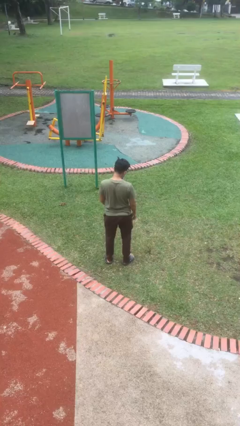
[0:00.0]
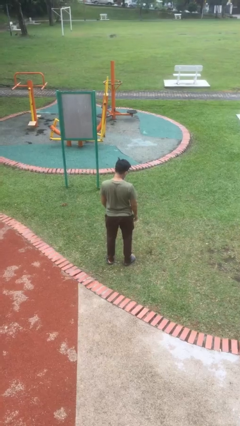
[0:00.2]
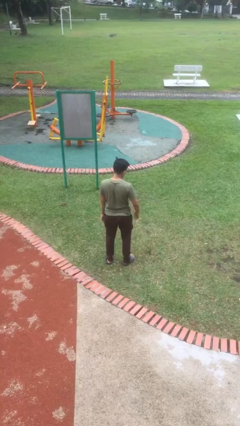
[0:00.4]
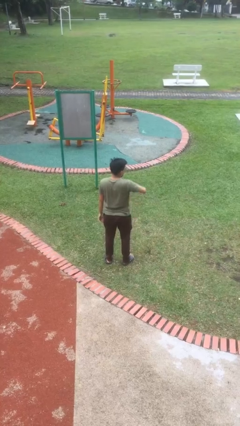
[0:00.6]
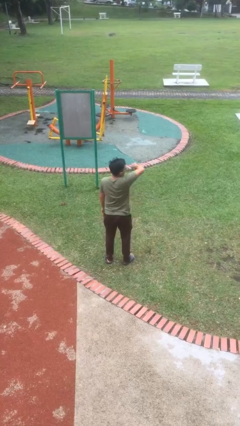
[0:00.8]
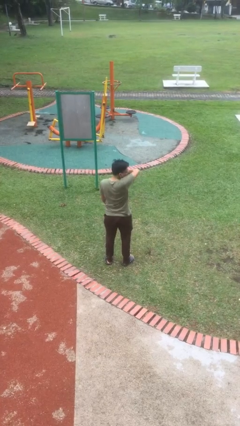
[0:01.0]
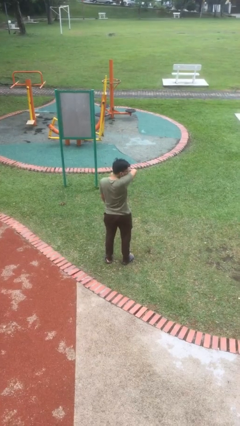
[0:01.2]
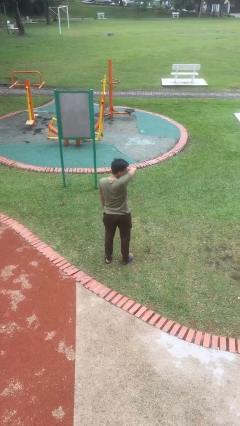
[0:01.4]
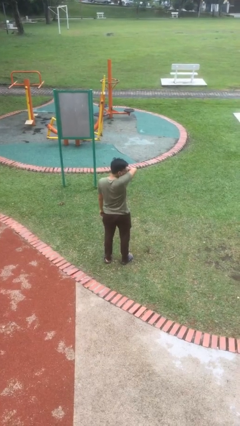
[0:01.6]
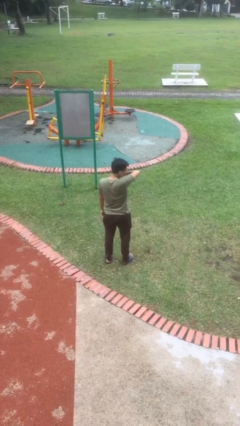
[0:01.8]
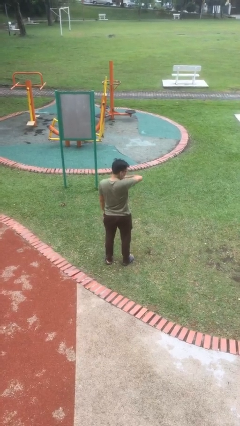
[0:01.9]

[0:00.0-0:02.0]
person sneezes into arm

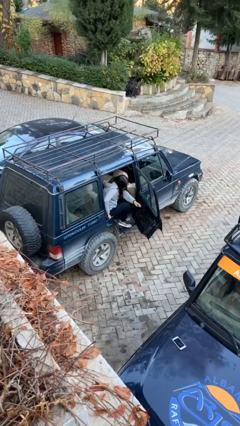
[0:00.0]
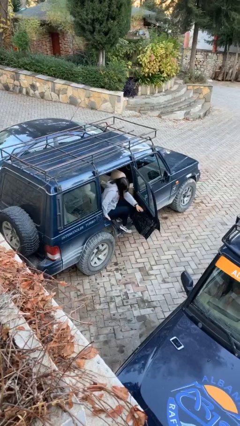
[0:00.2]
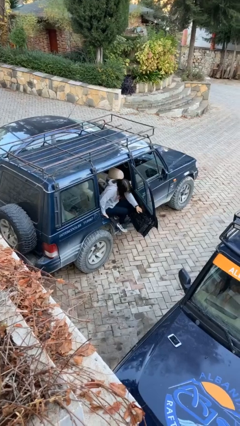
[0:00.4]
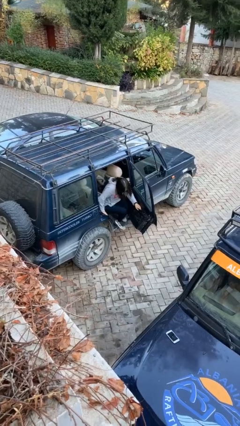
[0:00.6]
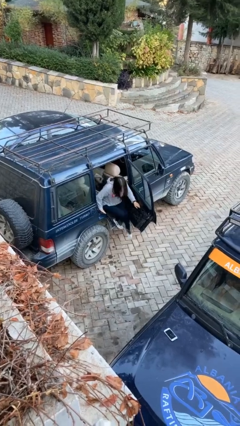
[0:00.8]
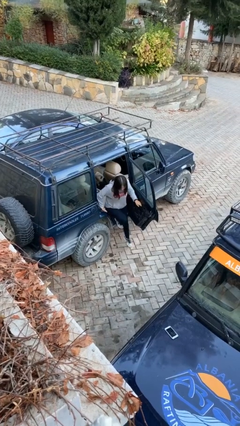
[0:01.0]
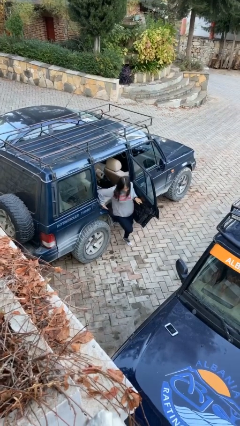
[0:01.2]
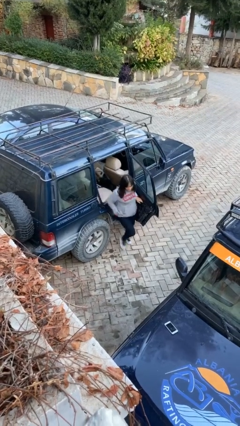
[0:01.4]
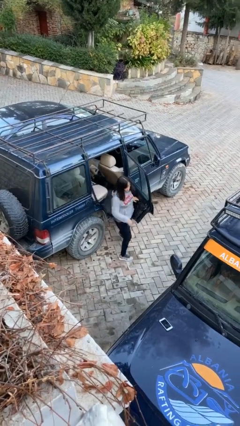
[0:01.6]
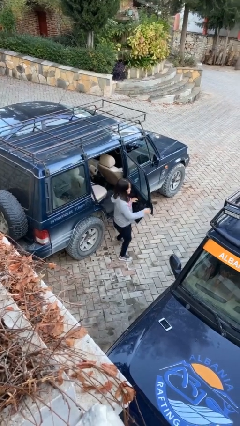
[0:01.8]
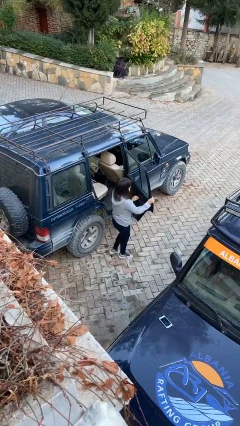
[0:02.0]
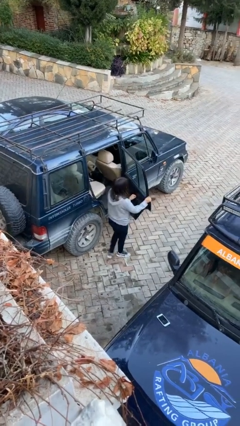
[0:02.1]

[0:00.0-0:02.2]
person exits car

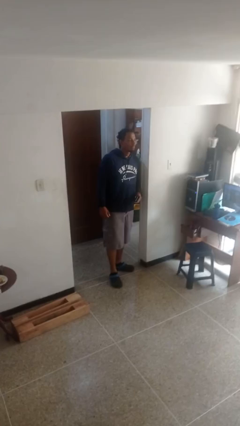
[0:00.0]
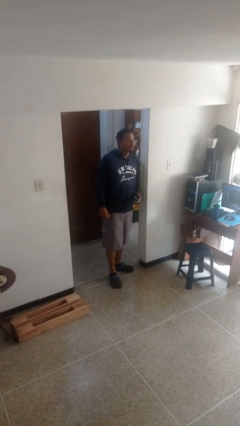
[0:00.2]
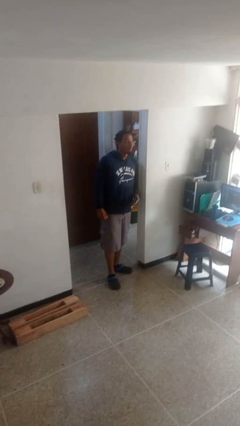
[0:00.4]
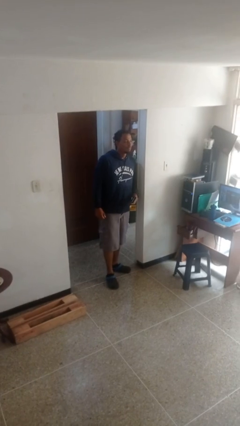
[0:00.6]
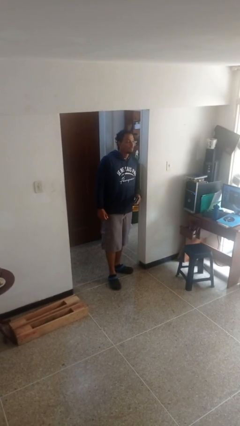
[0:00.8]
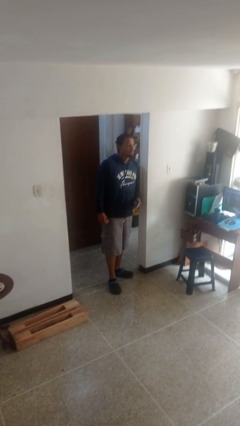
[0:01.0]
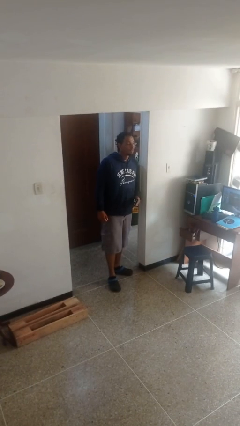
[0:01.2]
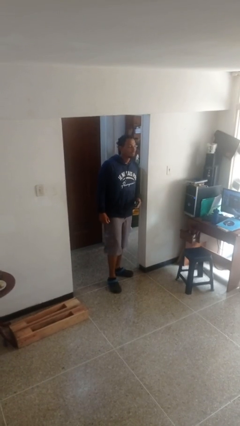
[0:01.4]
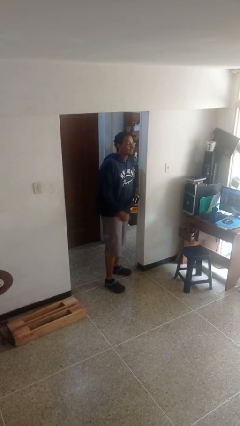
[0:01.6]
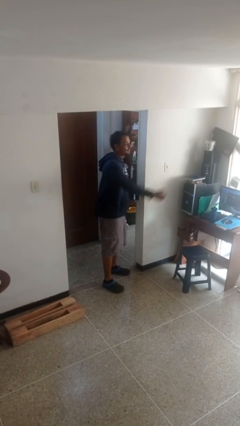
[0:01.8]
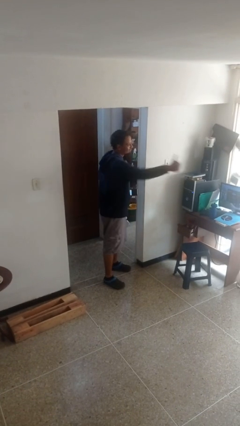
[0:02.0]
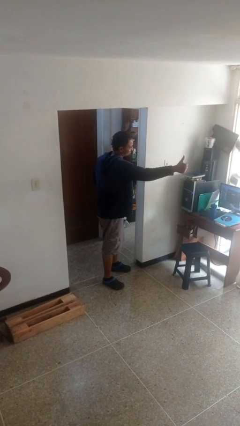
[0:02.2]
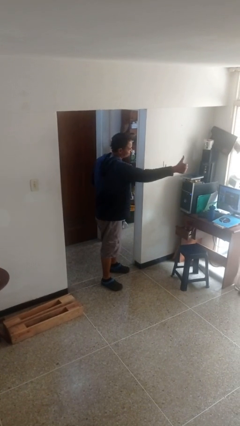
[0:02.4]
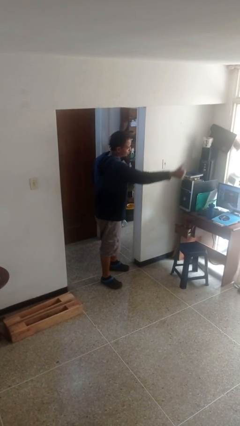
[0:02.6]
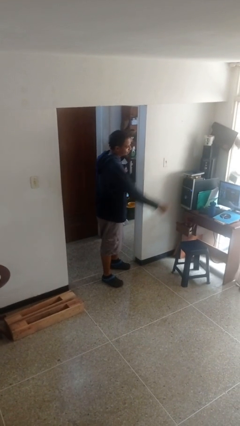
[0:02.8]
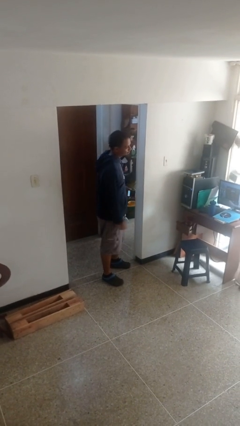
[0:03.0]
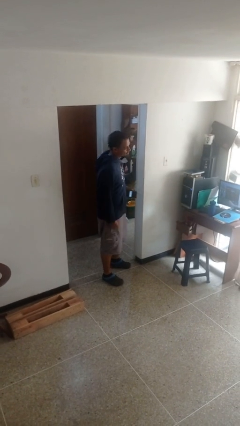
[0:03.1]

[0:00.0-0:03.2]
person gestures thumbs up

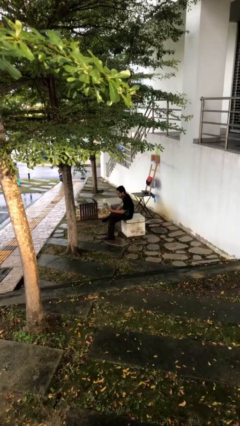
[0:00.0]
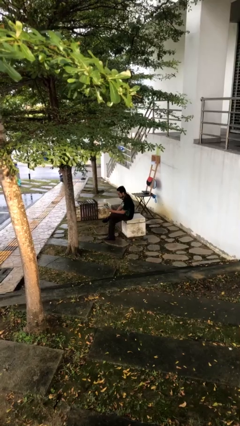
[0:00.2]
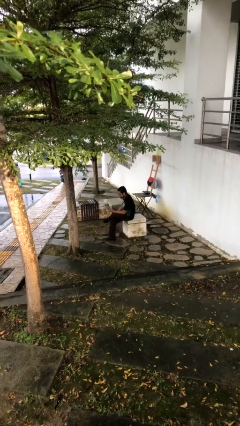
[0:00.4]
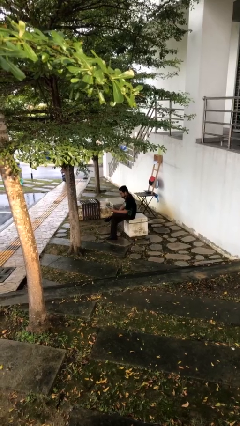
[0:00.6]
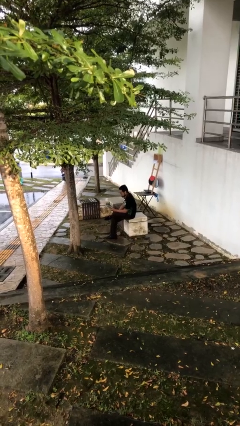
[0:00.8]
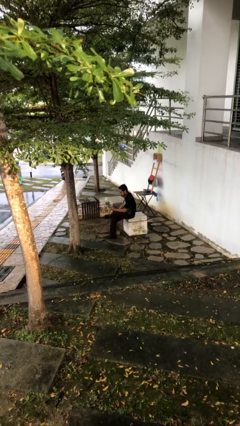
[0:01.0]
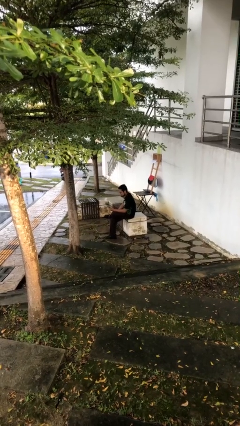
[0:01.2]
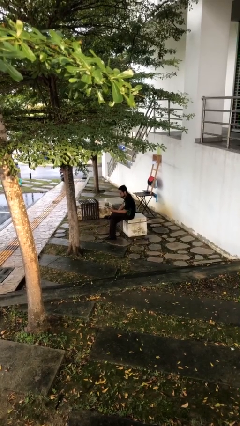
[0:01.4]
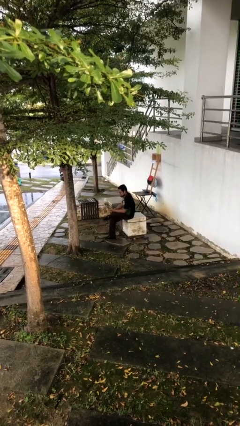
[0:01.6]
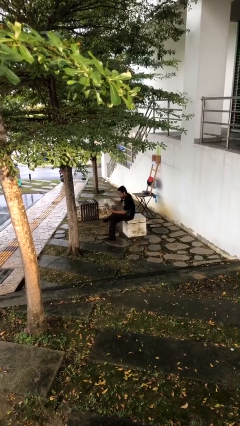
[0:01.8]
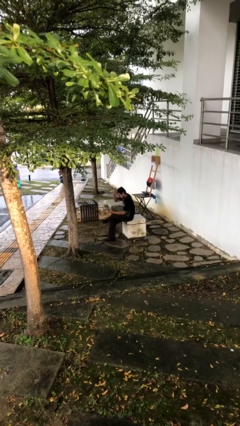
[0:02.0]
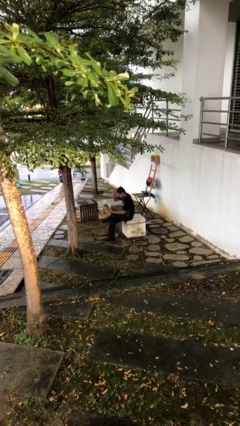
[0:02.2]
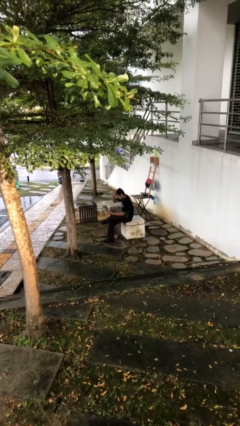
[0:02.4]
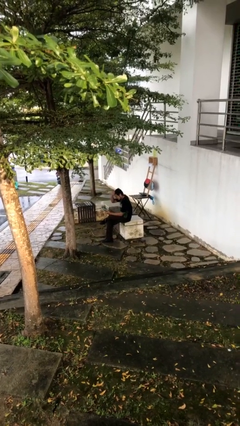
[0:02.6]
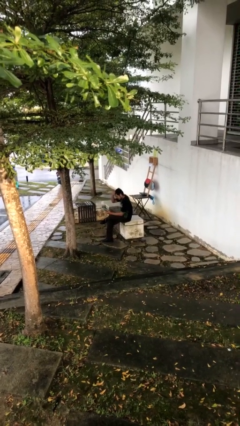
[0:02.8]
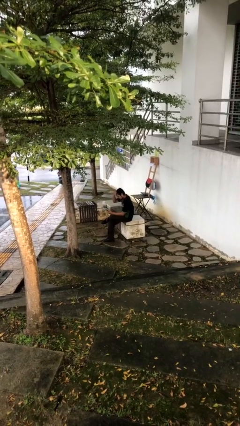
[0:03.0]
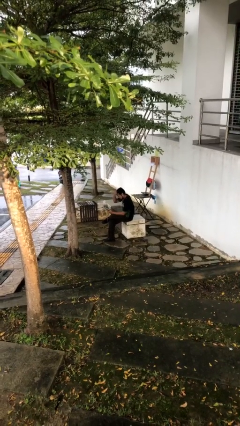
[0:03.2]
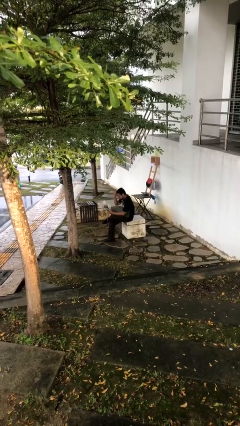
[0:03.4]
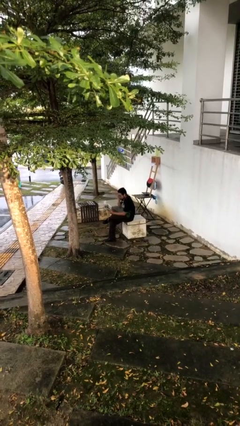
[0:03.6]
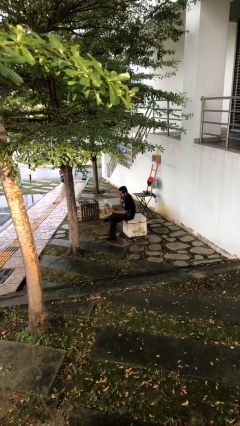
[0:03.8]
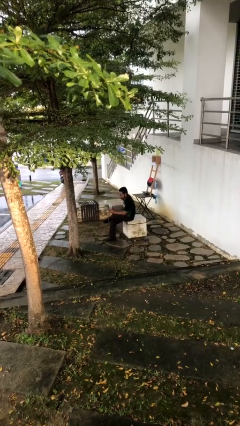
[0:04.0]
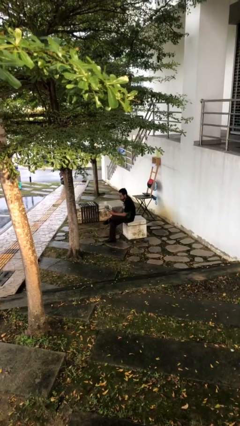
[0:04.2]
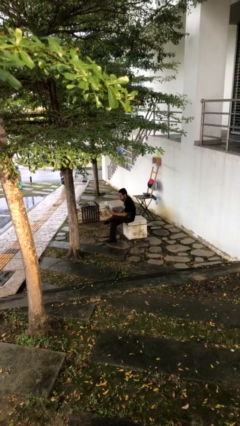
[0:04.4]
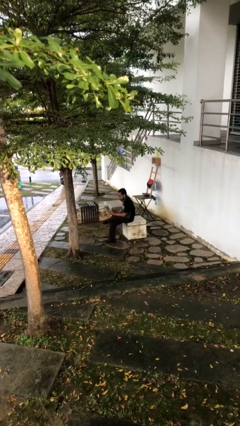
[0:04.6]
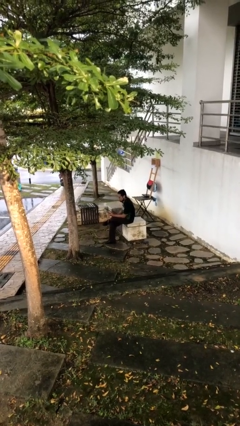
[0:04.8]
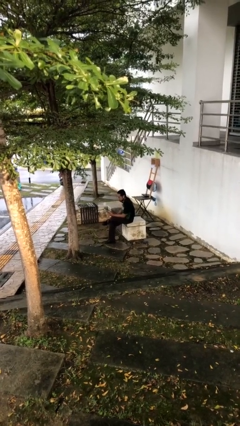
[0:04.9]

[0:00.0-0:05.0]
person reads document

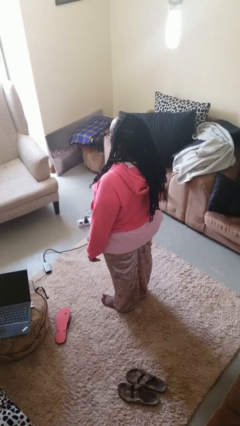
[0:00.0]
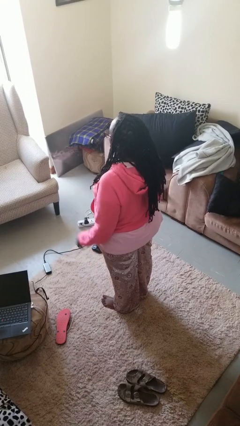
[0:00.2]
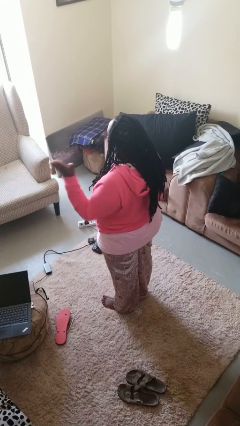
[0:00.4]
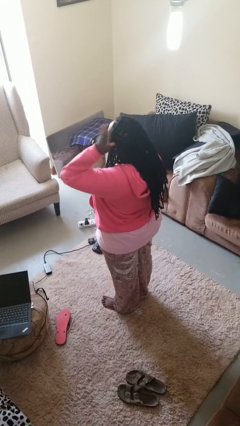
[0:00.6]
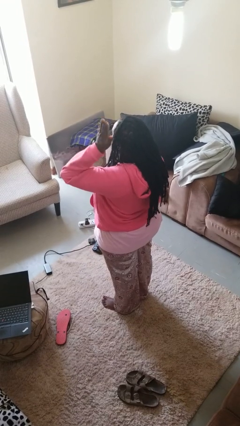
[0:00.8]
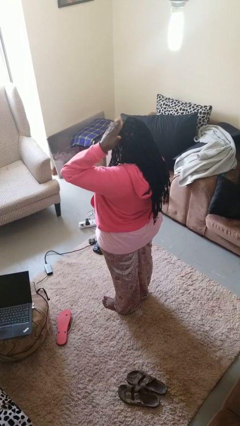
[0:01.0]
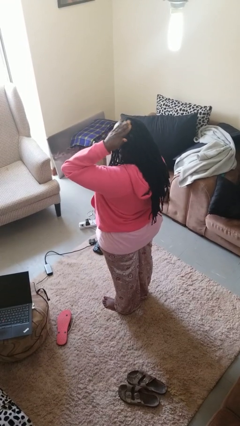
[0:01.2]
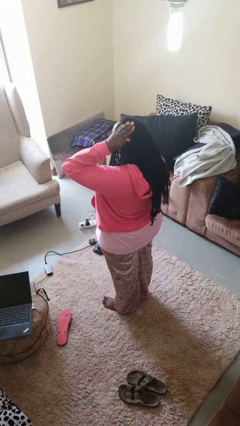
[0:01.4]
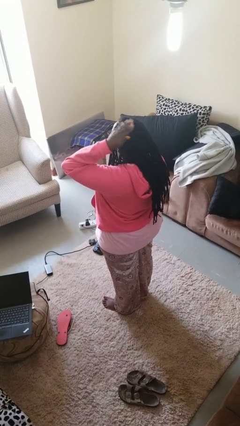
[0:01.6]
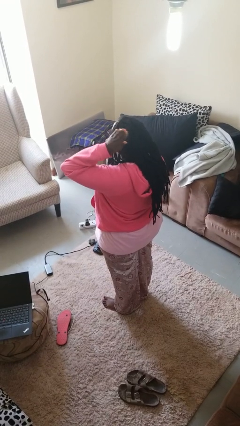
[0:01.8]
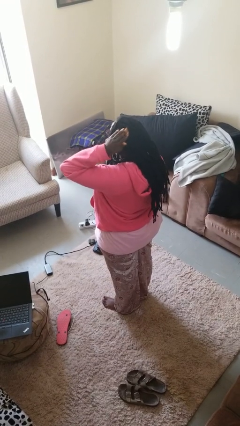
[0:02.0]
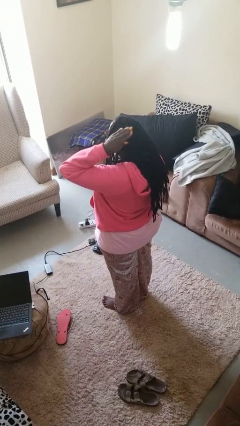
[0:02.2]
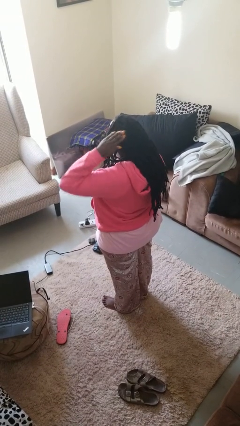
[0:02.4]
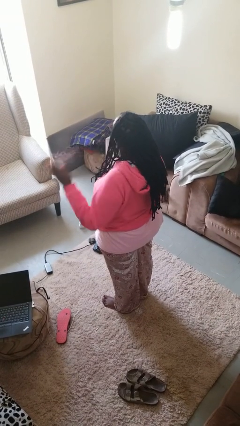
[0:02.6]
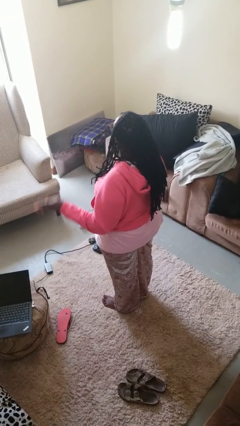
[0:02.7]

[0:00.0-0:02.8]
person pats head

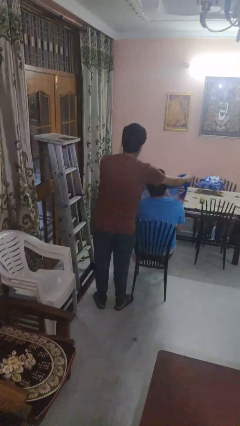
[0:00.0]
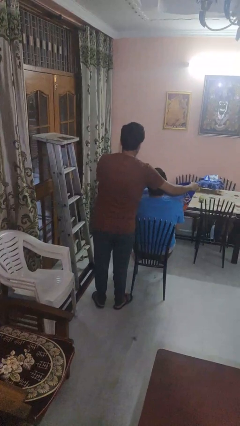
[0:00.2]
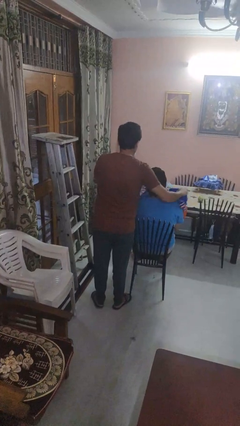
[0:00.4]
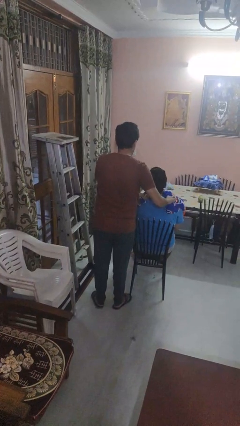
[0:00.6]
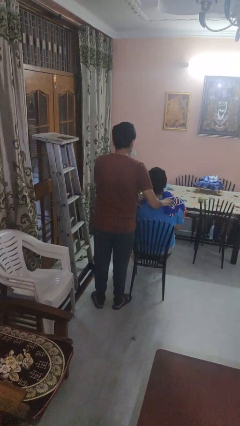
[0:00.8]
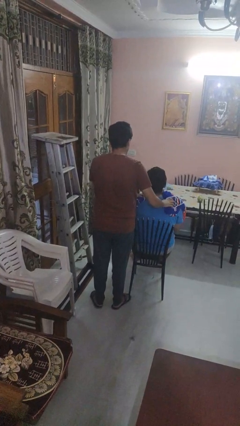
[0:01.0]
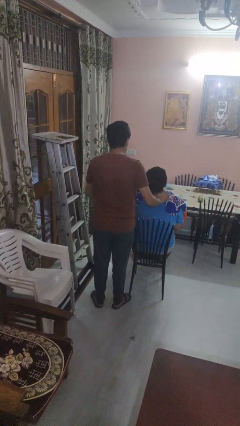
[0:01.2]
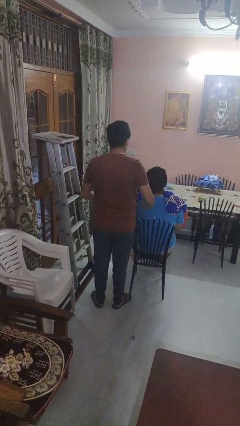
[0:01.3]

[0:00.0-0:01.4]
person covers friend with blanket

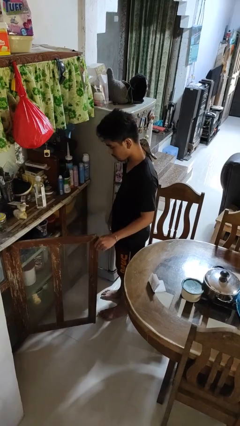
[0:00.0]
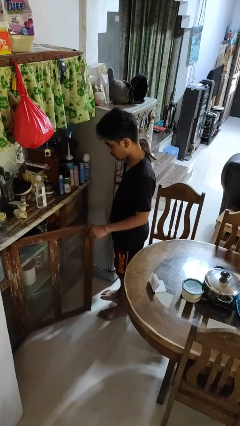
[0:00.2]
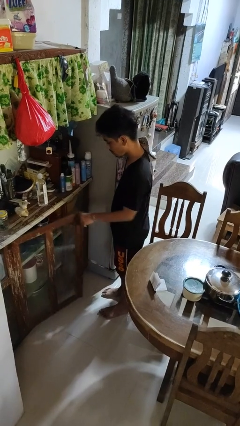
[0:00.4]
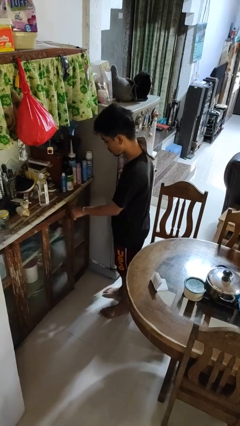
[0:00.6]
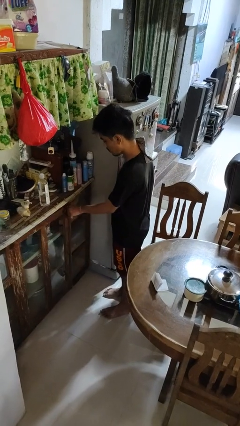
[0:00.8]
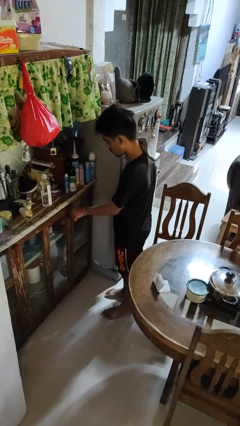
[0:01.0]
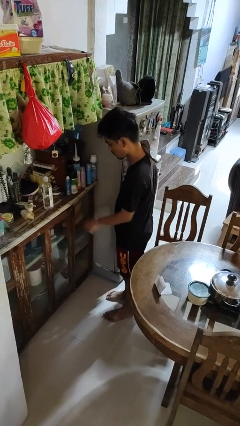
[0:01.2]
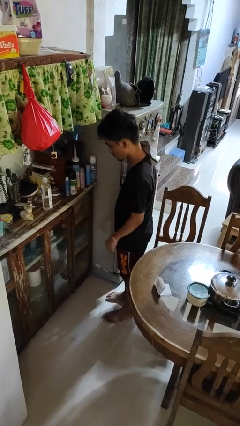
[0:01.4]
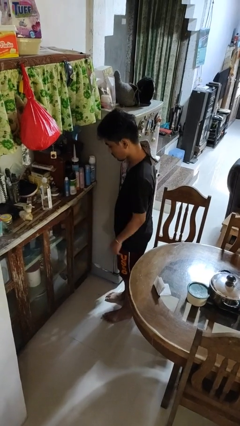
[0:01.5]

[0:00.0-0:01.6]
person closes cabinet
